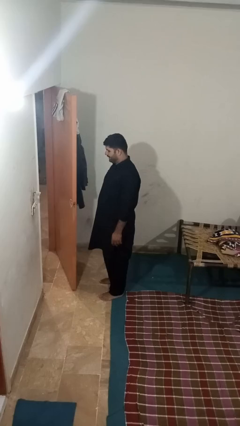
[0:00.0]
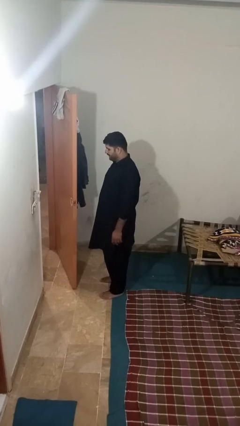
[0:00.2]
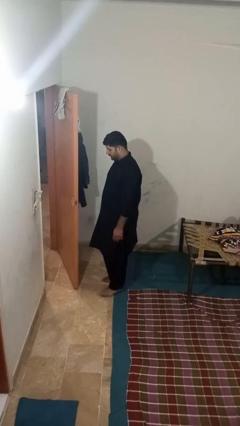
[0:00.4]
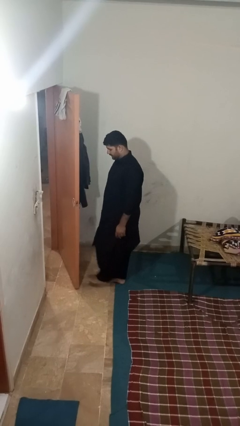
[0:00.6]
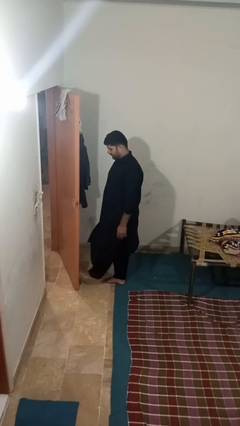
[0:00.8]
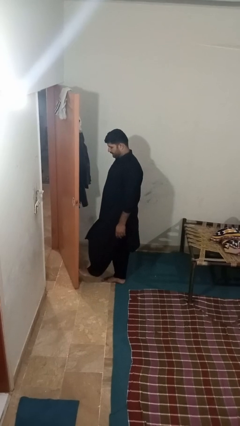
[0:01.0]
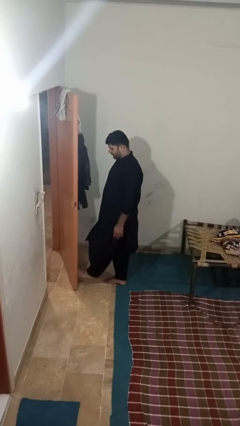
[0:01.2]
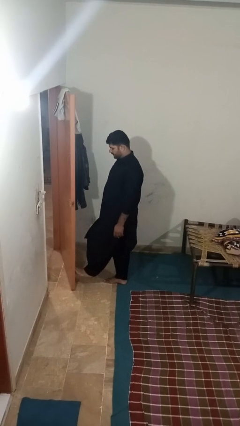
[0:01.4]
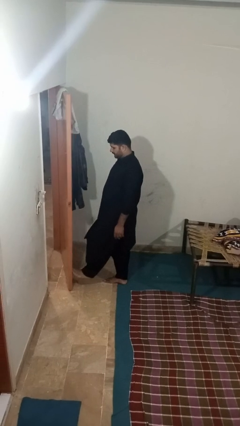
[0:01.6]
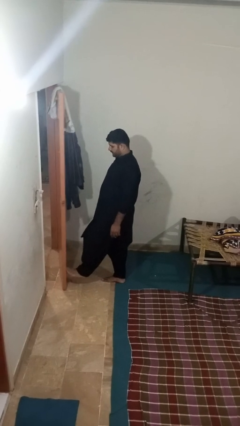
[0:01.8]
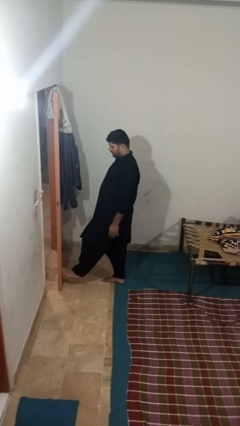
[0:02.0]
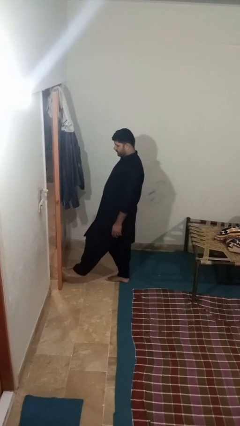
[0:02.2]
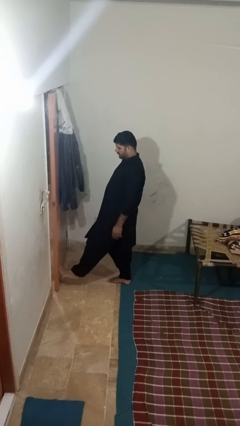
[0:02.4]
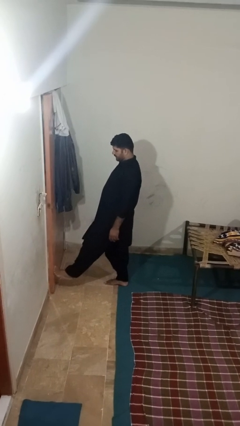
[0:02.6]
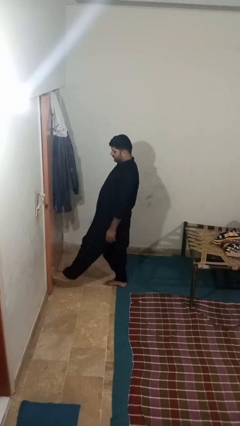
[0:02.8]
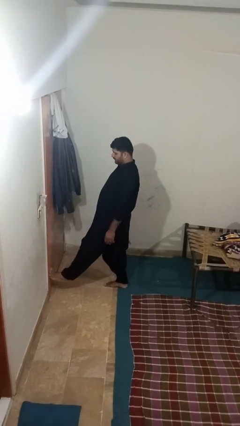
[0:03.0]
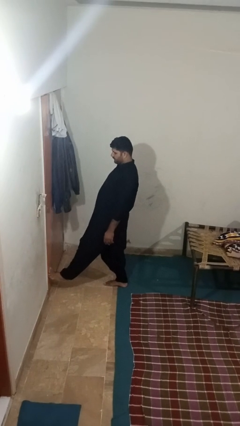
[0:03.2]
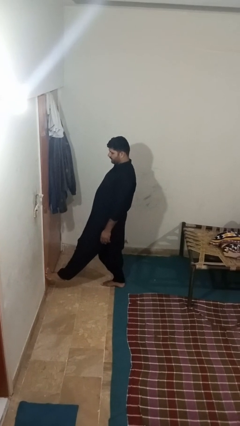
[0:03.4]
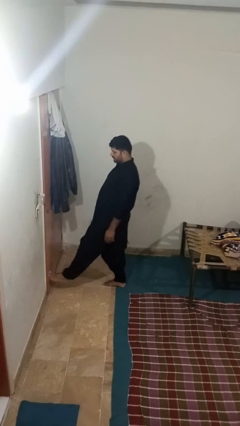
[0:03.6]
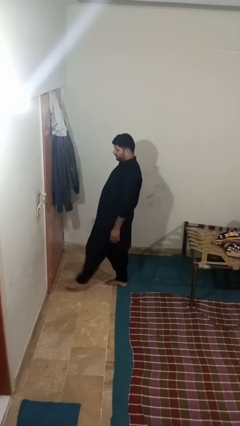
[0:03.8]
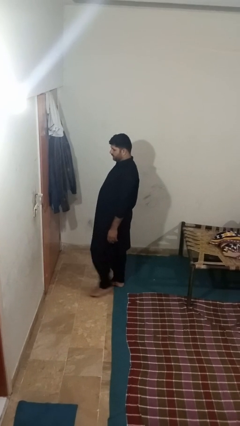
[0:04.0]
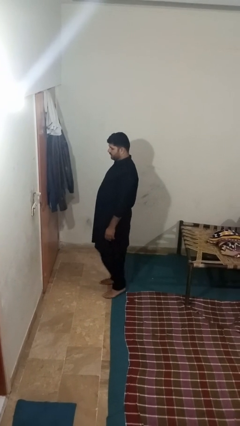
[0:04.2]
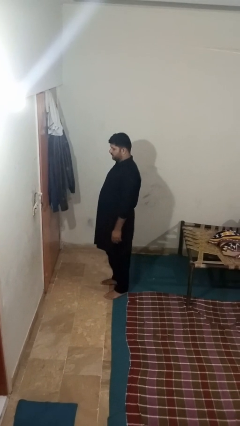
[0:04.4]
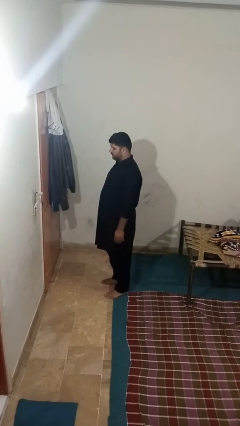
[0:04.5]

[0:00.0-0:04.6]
person closes door with foot

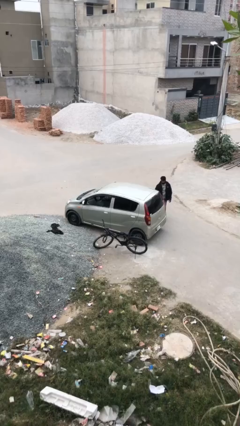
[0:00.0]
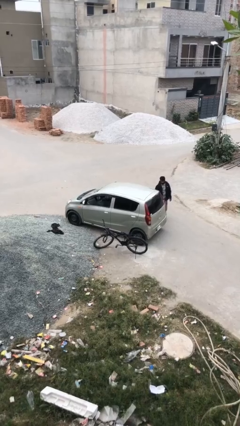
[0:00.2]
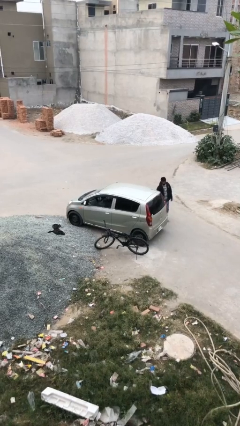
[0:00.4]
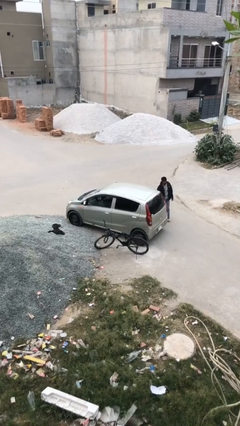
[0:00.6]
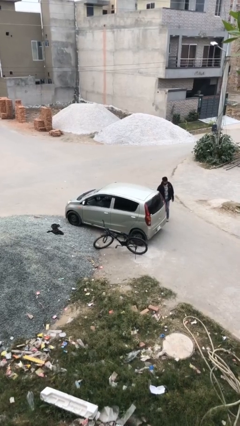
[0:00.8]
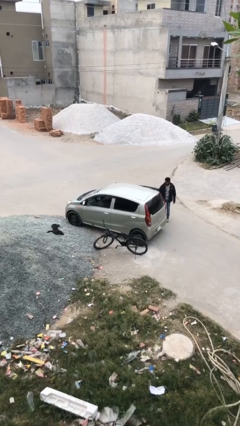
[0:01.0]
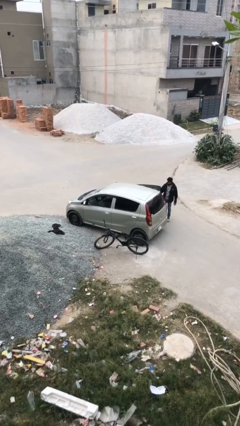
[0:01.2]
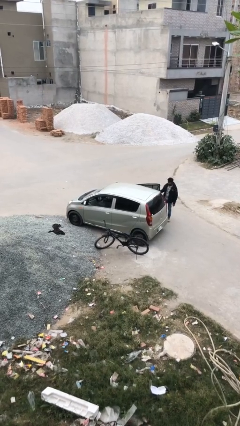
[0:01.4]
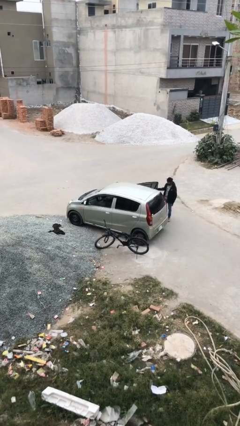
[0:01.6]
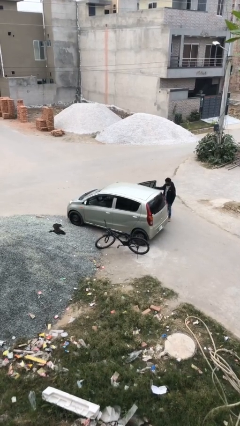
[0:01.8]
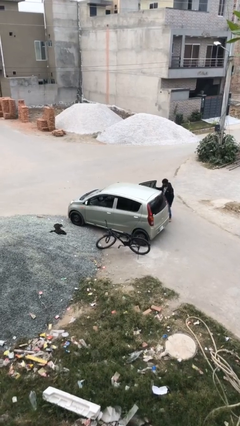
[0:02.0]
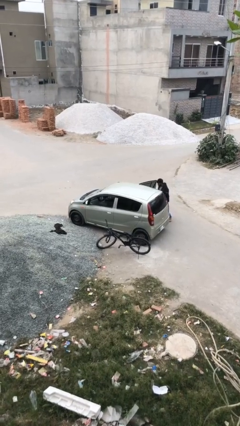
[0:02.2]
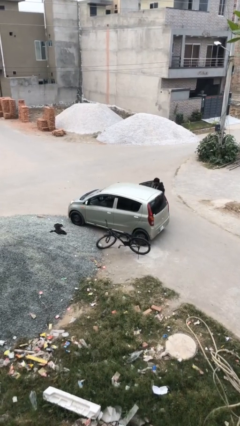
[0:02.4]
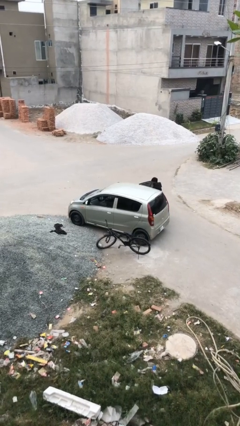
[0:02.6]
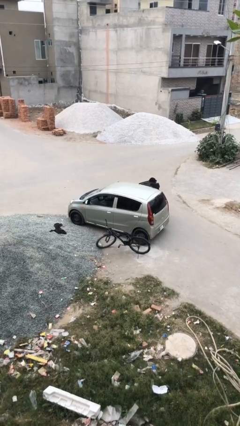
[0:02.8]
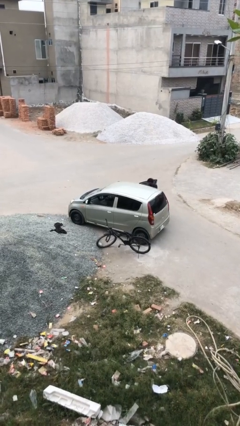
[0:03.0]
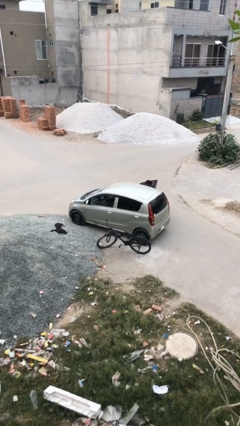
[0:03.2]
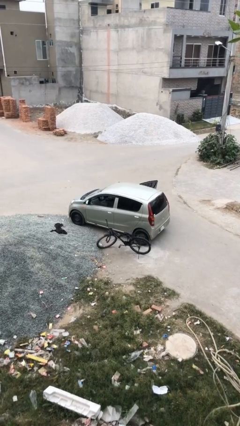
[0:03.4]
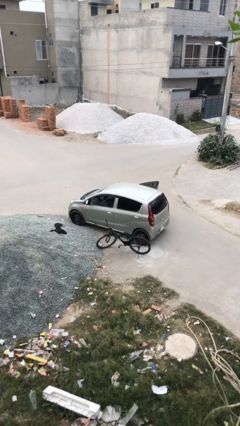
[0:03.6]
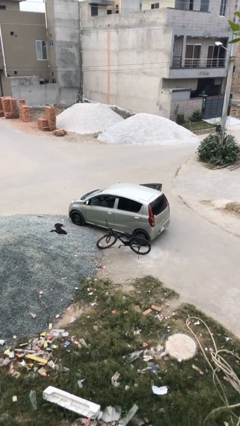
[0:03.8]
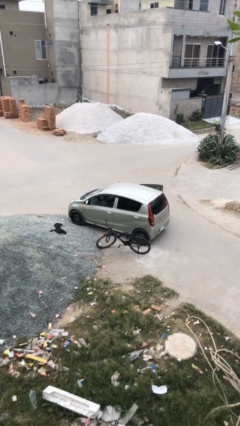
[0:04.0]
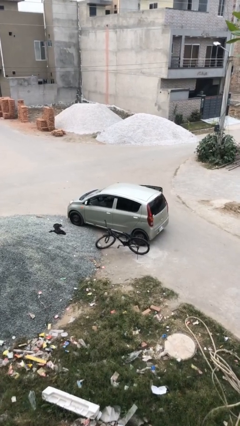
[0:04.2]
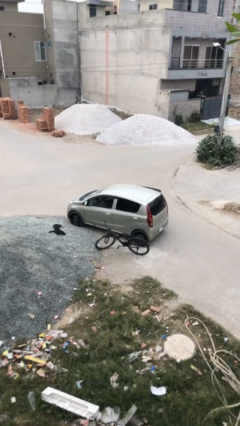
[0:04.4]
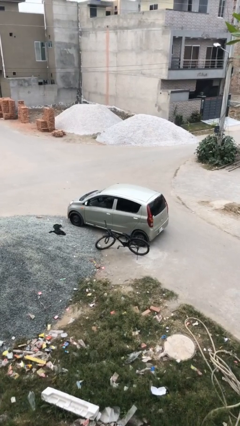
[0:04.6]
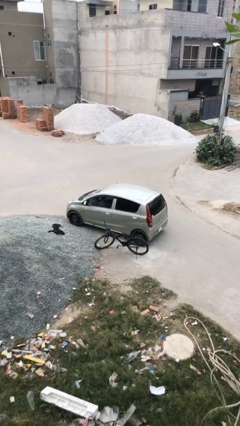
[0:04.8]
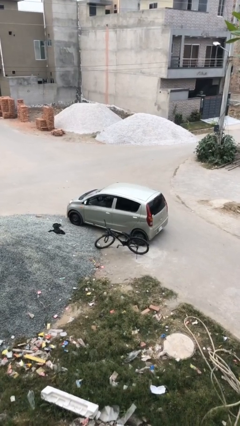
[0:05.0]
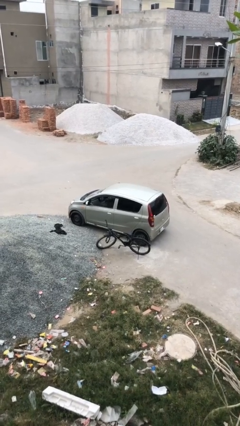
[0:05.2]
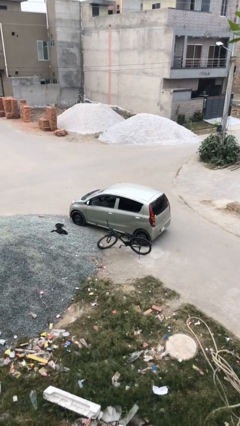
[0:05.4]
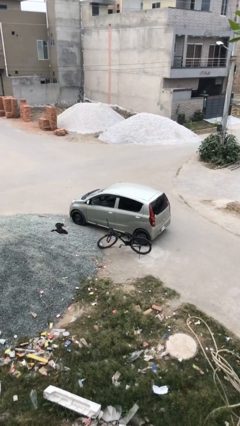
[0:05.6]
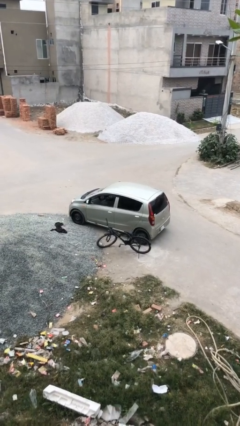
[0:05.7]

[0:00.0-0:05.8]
car picks up person

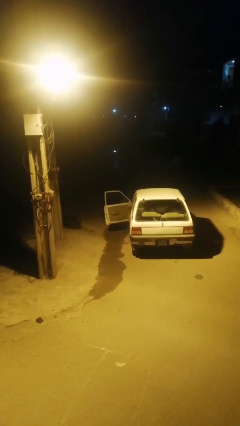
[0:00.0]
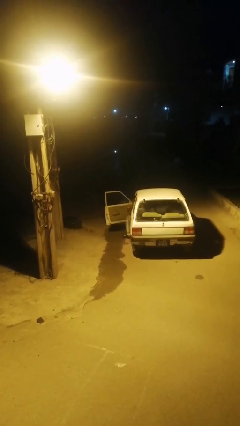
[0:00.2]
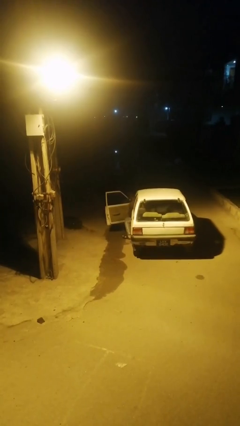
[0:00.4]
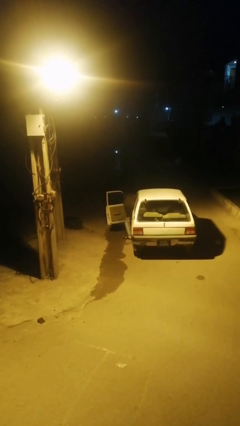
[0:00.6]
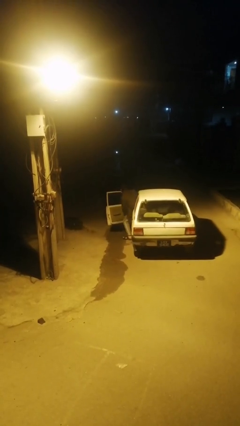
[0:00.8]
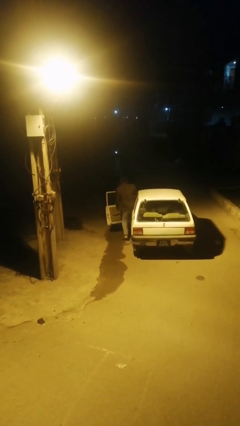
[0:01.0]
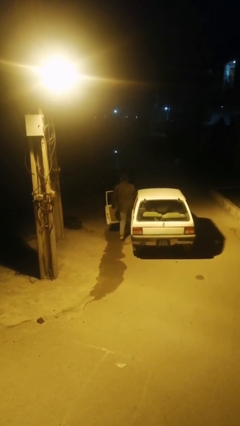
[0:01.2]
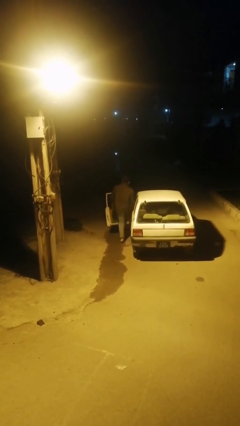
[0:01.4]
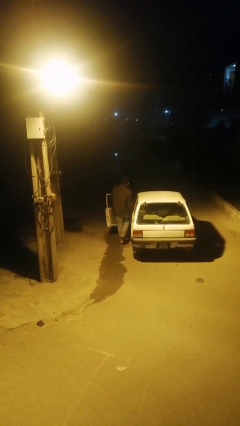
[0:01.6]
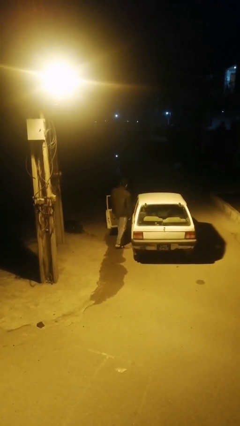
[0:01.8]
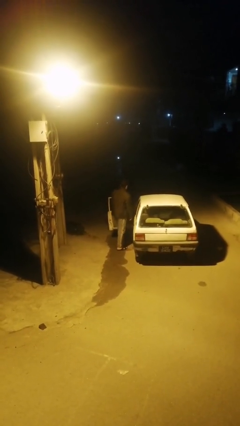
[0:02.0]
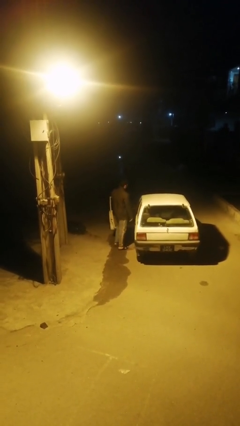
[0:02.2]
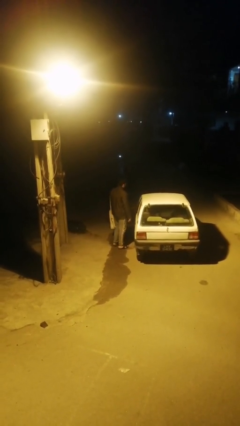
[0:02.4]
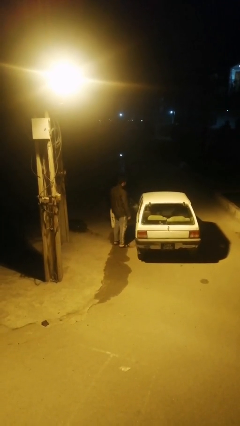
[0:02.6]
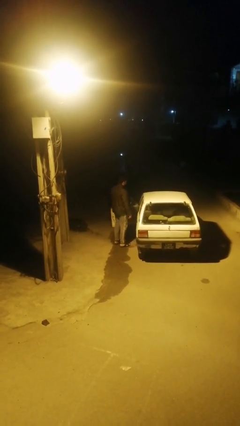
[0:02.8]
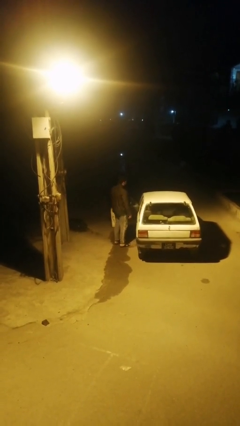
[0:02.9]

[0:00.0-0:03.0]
person exits car

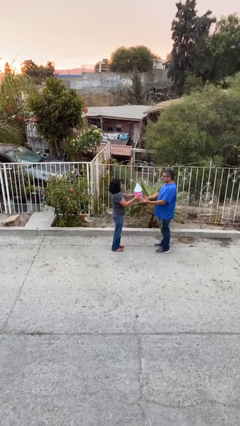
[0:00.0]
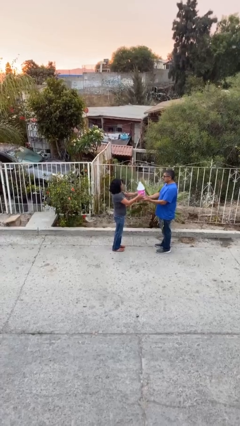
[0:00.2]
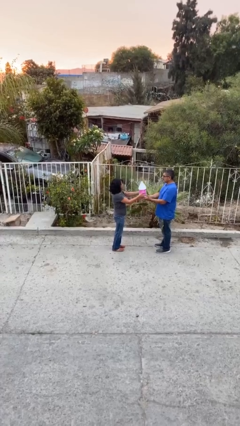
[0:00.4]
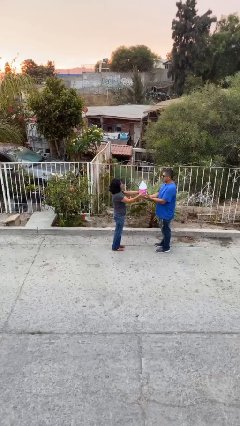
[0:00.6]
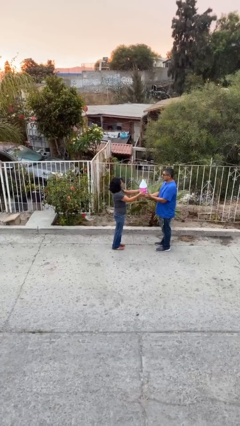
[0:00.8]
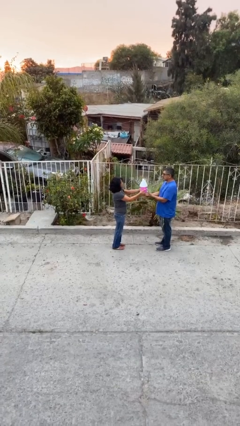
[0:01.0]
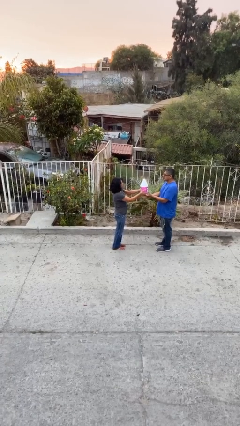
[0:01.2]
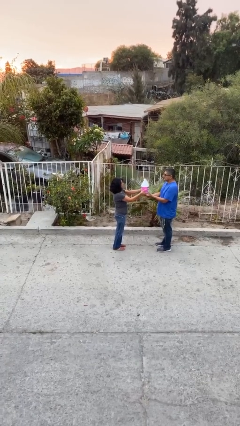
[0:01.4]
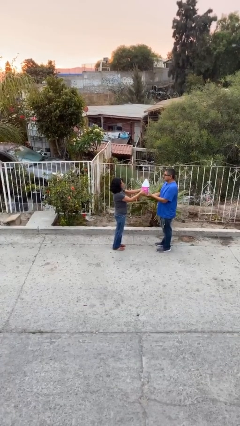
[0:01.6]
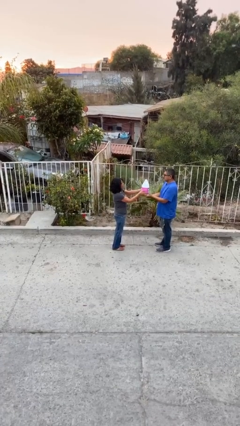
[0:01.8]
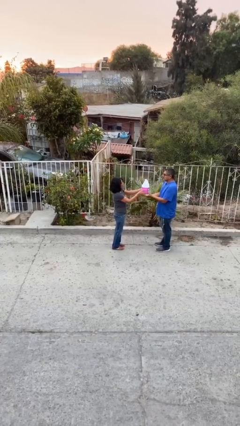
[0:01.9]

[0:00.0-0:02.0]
person transfers object to person

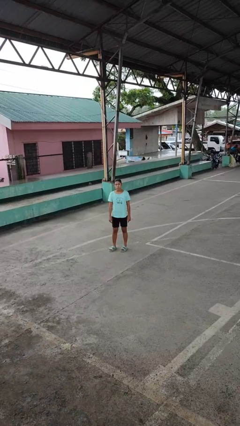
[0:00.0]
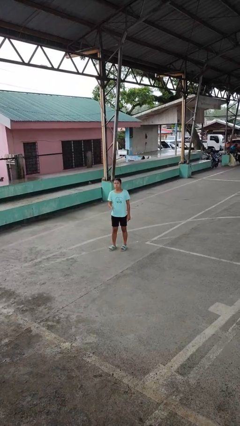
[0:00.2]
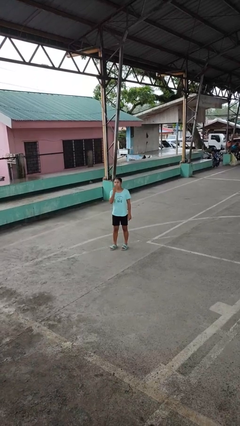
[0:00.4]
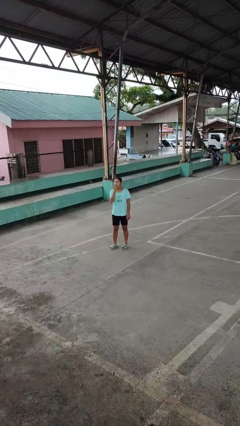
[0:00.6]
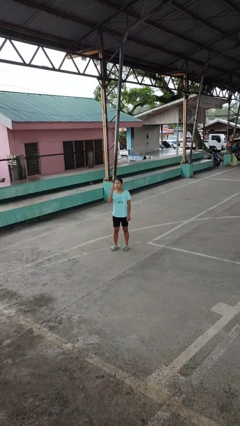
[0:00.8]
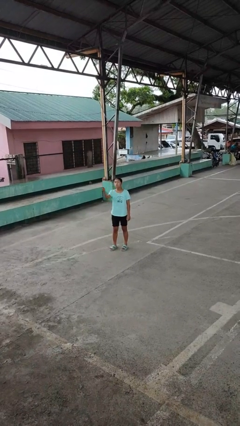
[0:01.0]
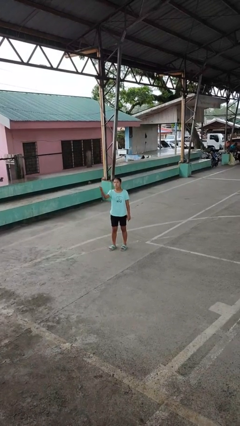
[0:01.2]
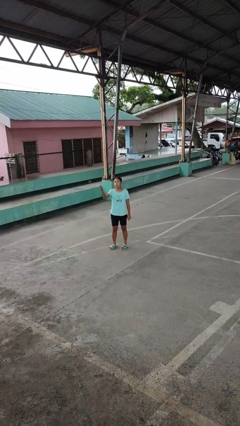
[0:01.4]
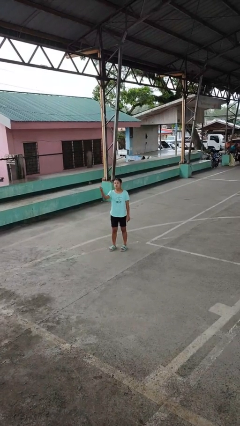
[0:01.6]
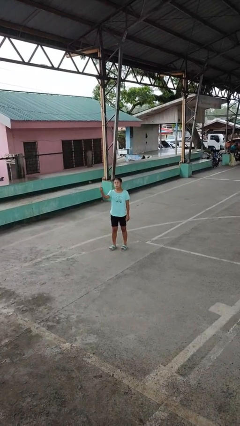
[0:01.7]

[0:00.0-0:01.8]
person gestures blow kiss

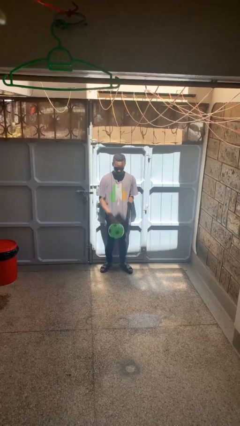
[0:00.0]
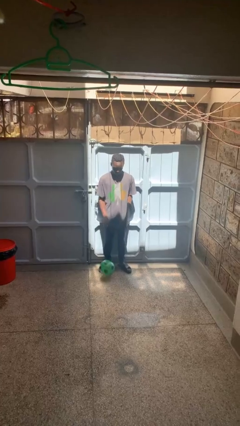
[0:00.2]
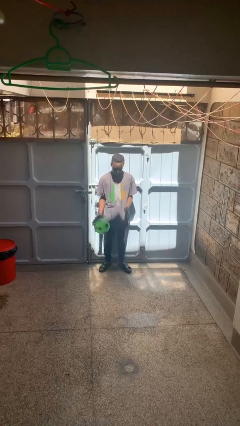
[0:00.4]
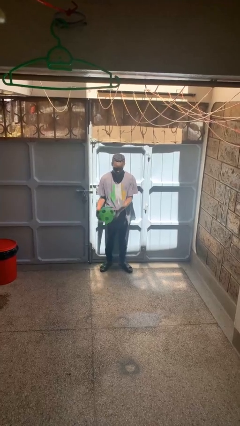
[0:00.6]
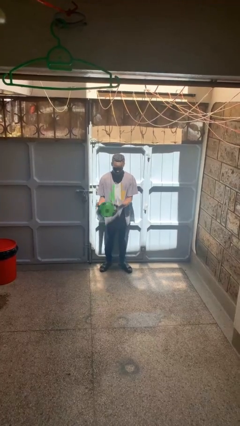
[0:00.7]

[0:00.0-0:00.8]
person bounces ball on floor
